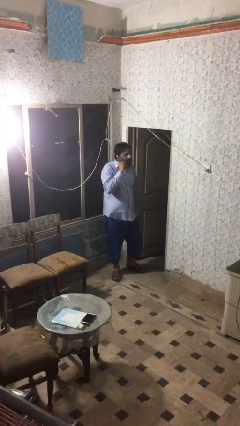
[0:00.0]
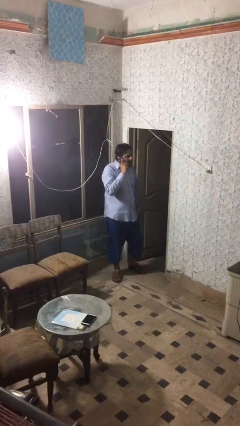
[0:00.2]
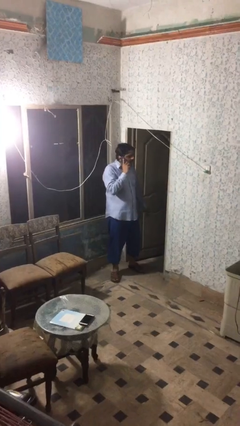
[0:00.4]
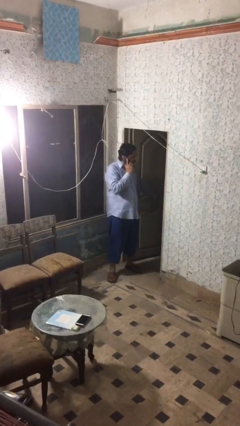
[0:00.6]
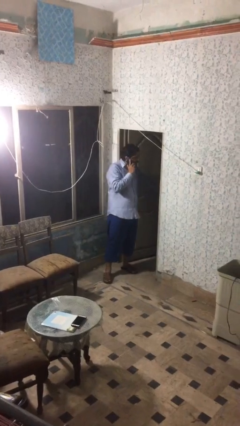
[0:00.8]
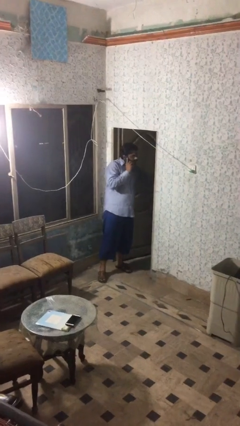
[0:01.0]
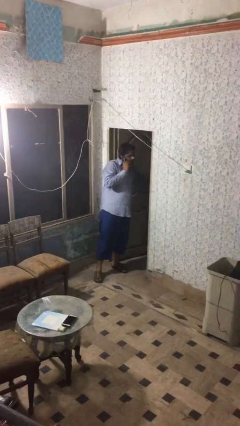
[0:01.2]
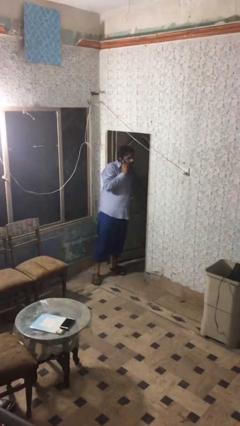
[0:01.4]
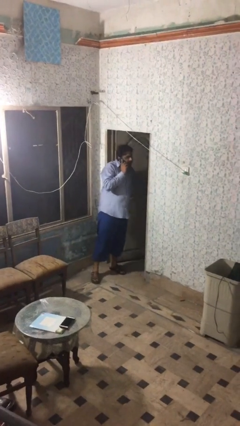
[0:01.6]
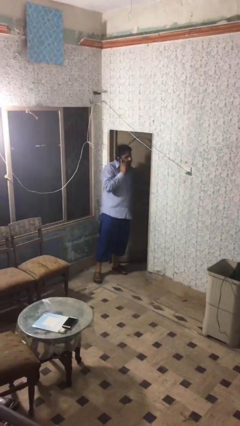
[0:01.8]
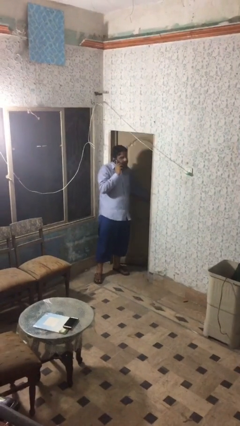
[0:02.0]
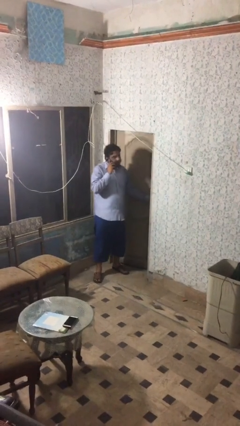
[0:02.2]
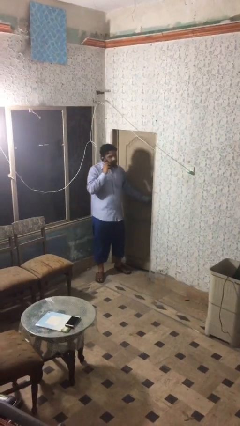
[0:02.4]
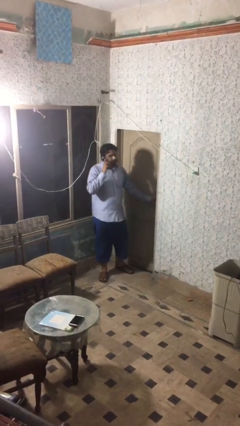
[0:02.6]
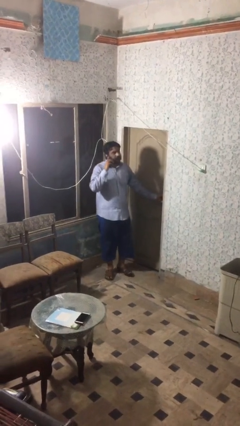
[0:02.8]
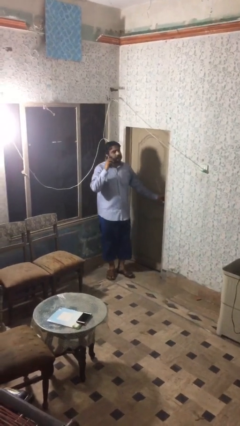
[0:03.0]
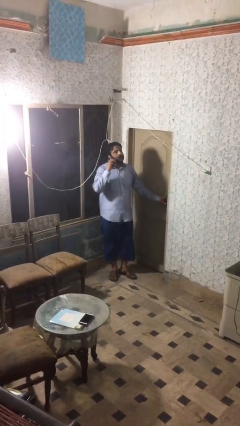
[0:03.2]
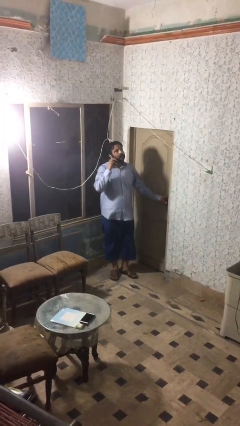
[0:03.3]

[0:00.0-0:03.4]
person closes facility door

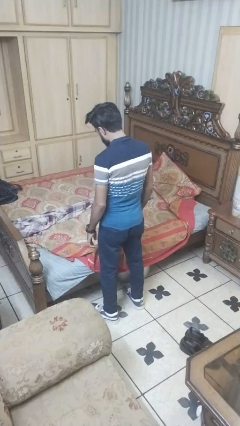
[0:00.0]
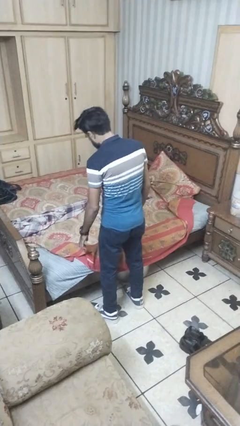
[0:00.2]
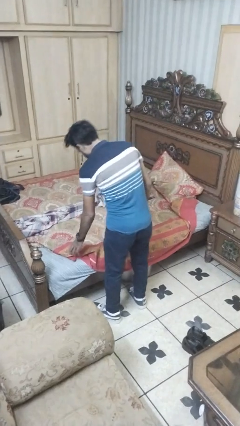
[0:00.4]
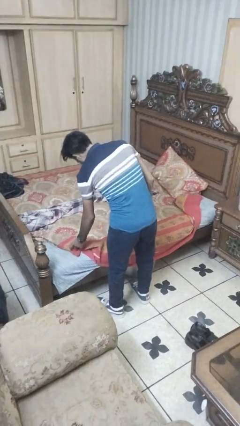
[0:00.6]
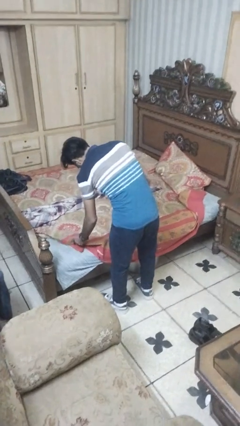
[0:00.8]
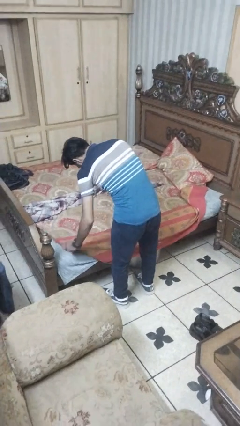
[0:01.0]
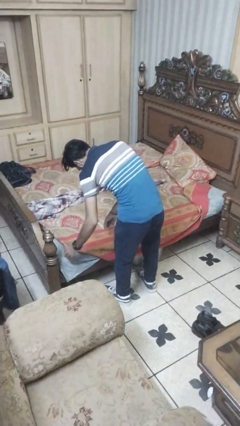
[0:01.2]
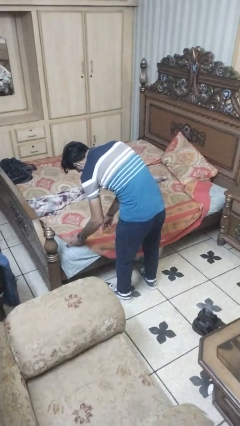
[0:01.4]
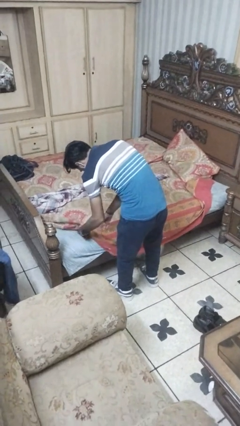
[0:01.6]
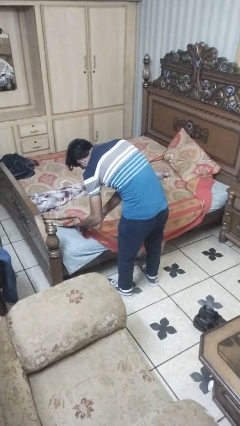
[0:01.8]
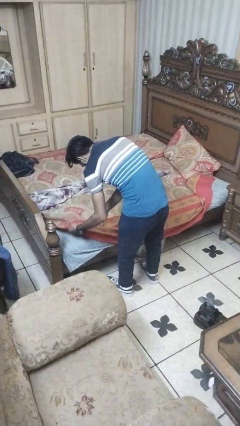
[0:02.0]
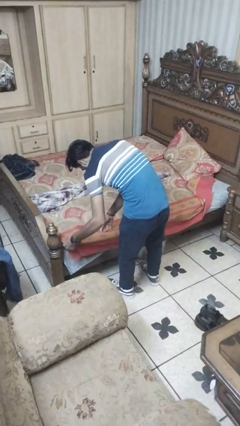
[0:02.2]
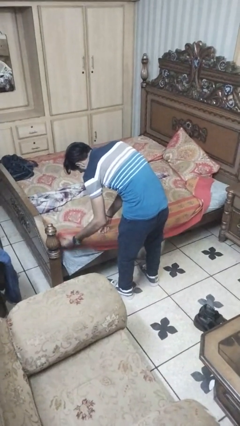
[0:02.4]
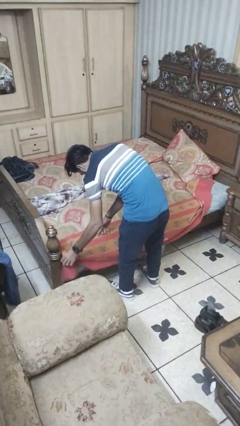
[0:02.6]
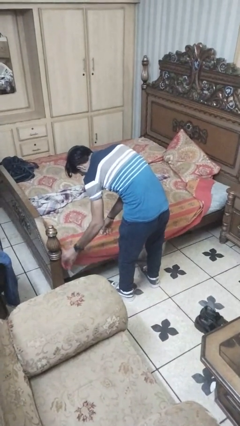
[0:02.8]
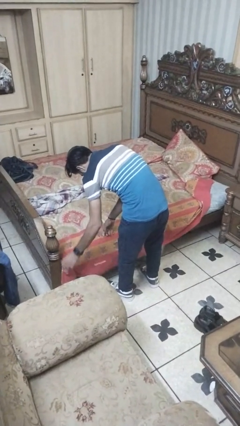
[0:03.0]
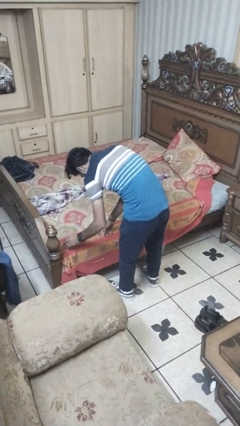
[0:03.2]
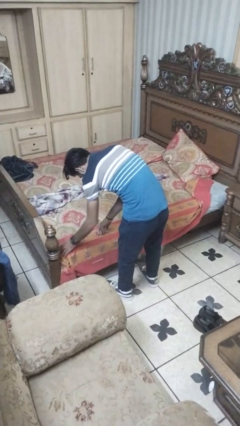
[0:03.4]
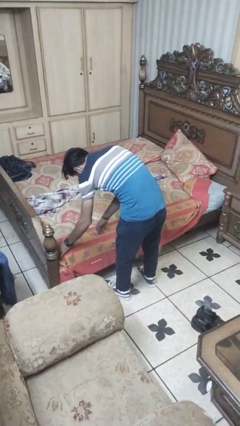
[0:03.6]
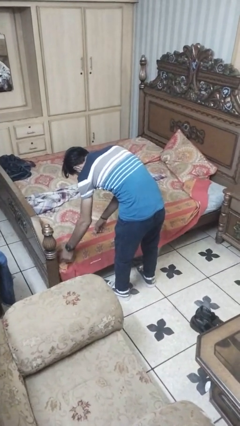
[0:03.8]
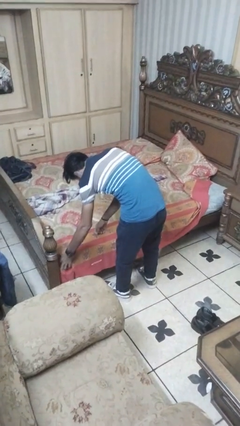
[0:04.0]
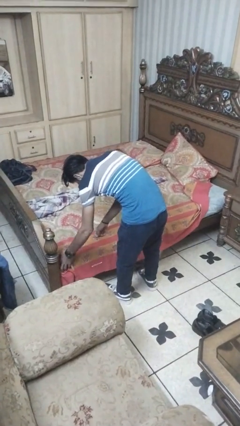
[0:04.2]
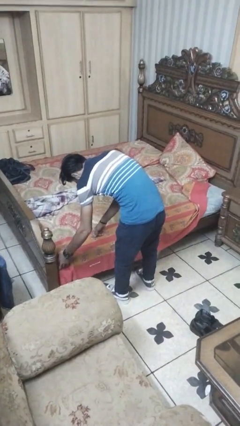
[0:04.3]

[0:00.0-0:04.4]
person makes bed

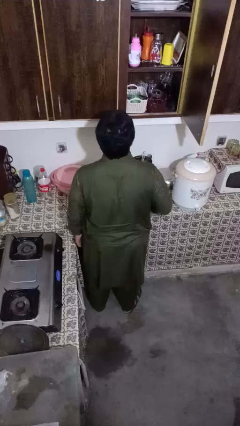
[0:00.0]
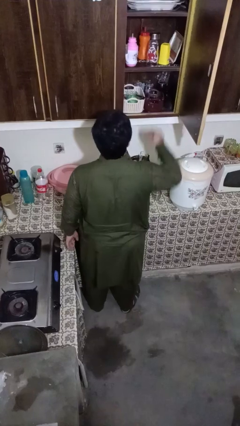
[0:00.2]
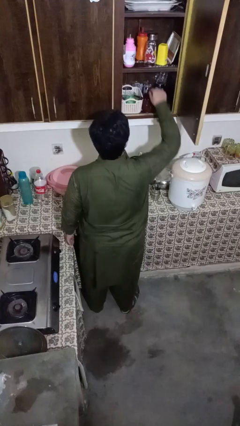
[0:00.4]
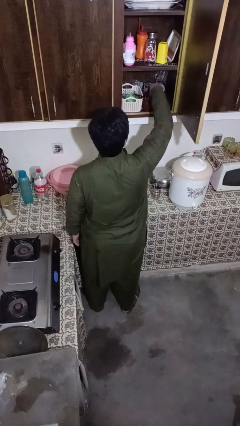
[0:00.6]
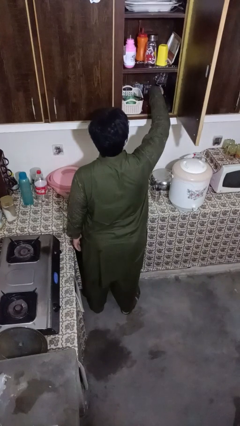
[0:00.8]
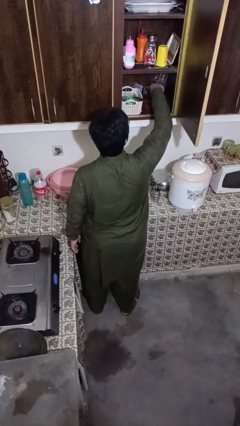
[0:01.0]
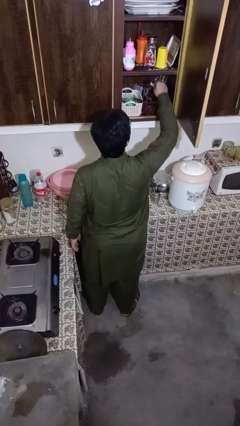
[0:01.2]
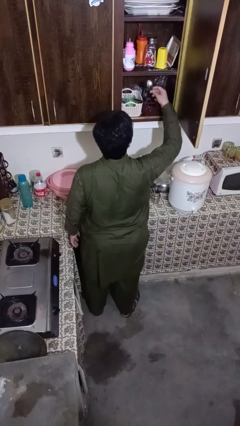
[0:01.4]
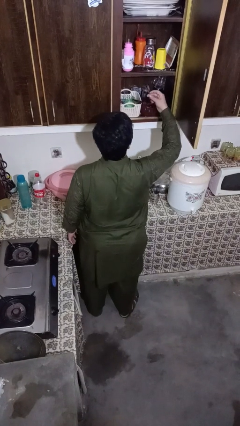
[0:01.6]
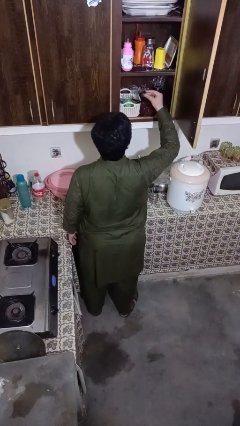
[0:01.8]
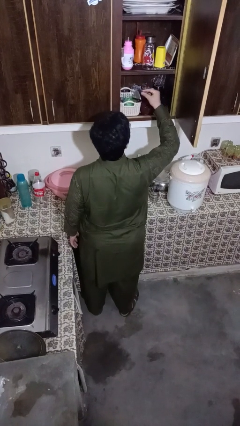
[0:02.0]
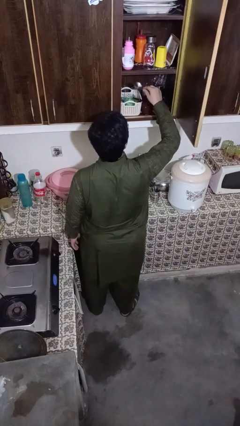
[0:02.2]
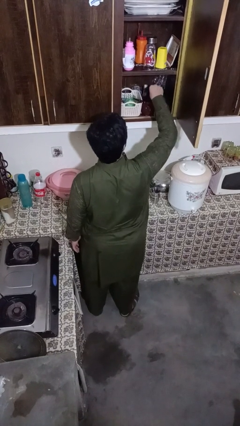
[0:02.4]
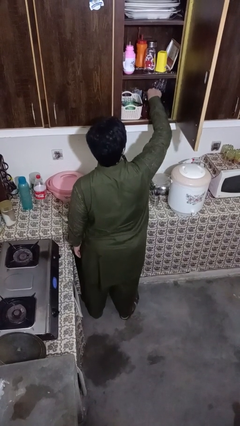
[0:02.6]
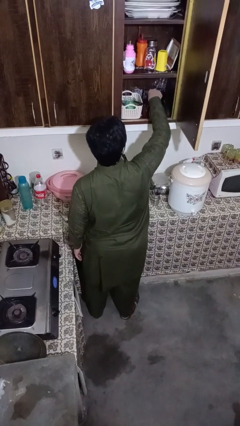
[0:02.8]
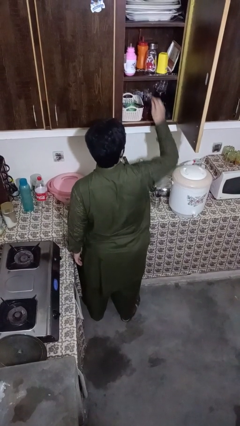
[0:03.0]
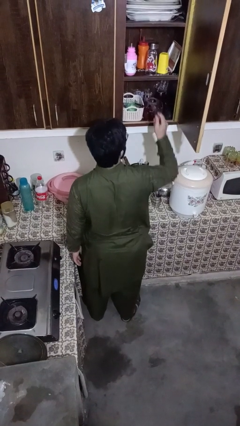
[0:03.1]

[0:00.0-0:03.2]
person takes object from kitchen drawer

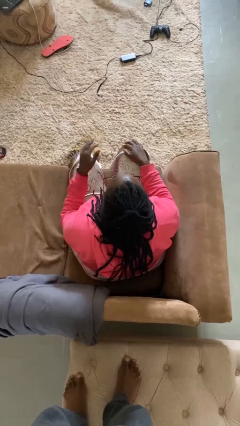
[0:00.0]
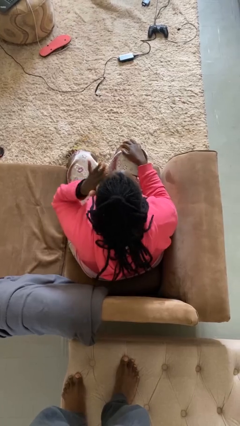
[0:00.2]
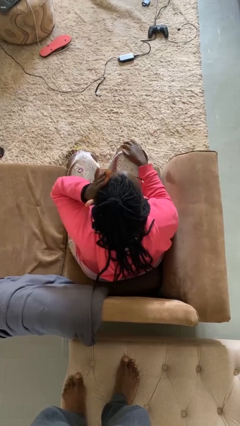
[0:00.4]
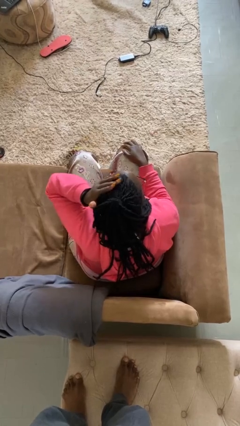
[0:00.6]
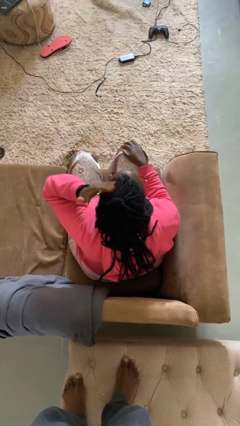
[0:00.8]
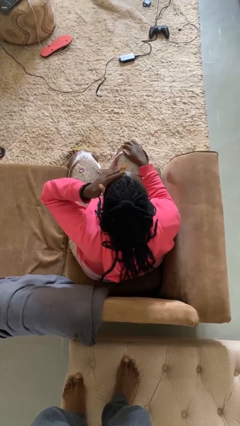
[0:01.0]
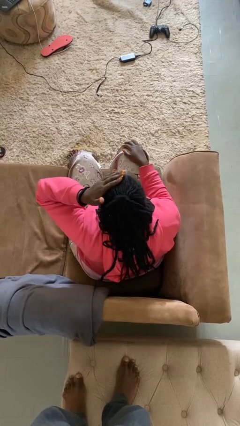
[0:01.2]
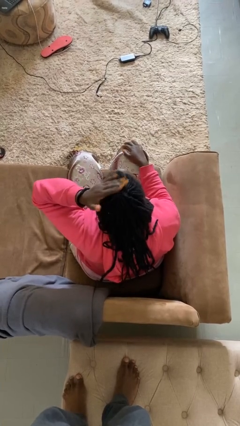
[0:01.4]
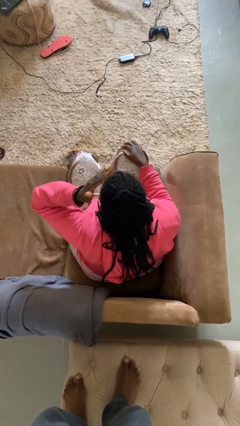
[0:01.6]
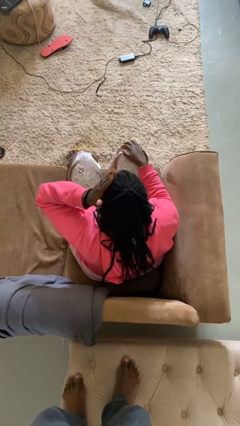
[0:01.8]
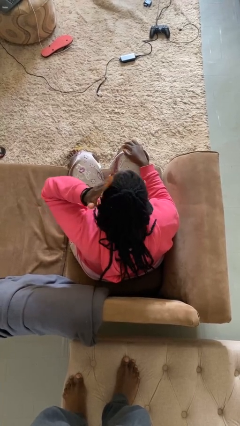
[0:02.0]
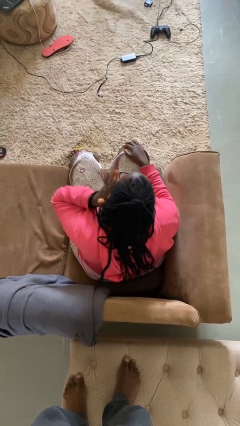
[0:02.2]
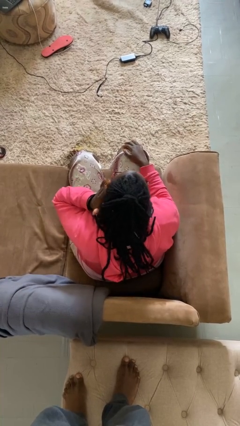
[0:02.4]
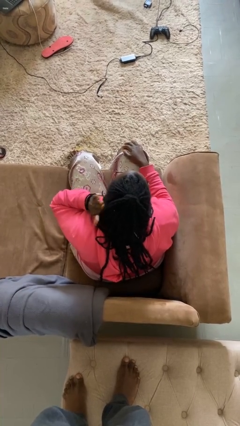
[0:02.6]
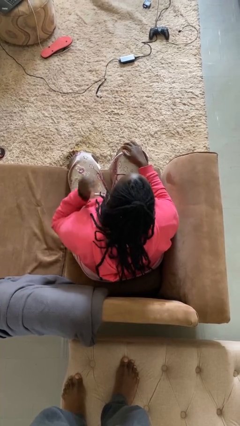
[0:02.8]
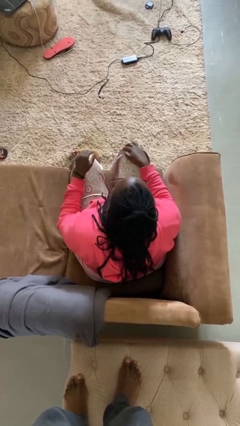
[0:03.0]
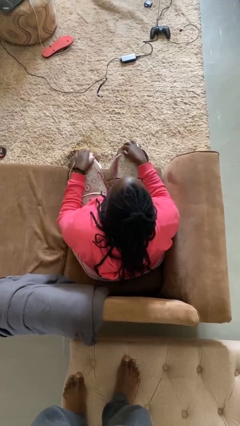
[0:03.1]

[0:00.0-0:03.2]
person strokes hair

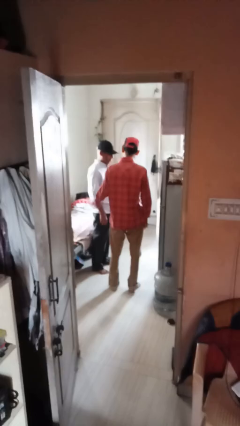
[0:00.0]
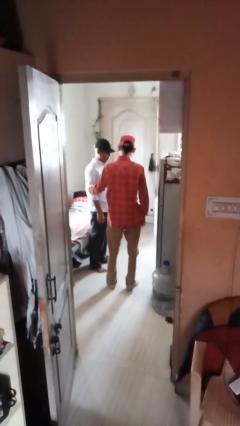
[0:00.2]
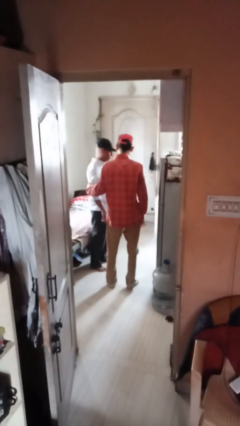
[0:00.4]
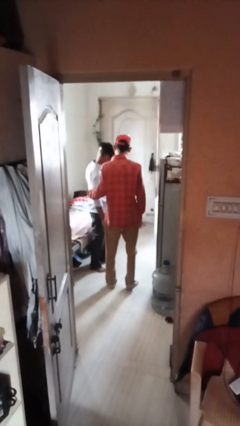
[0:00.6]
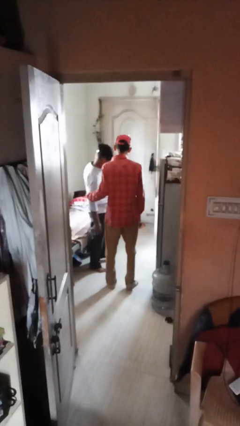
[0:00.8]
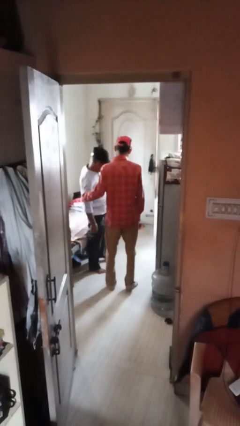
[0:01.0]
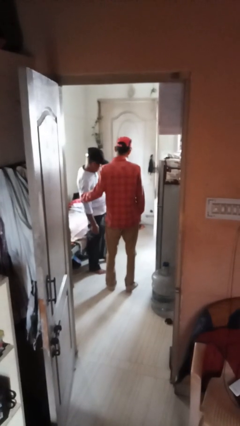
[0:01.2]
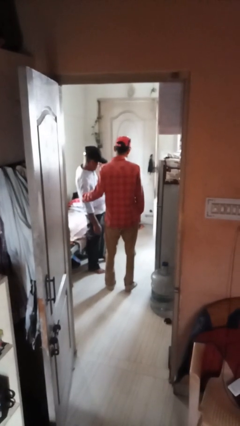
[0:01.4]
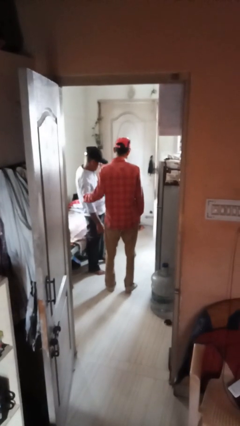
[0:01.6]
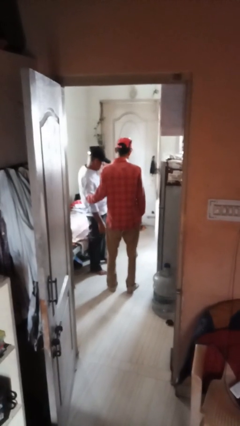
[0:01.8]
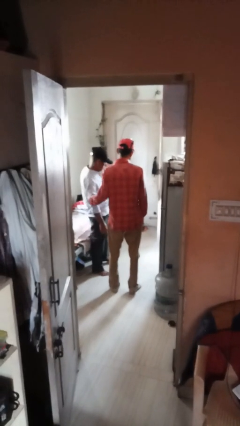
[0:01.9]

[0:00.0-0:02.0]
person grabs person by bicep

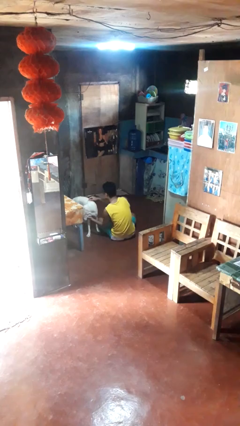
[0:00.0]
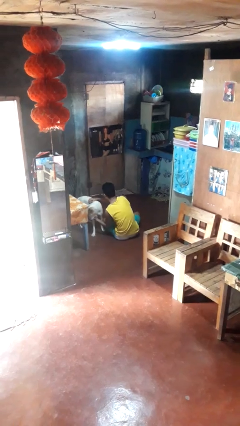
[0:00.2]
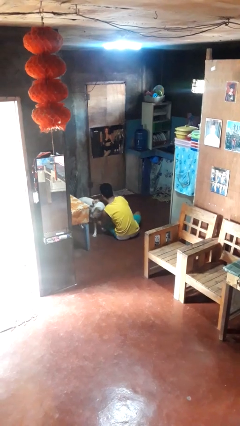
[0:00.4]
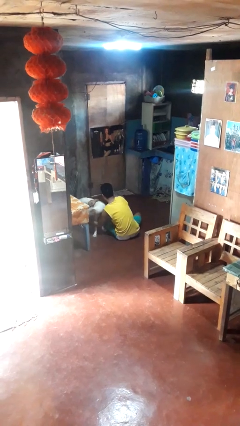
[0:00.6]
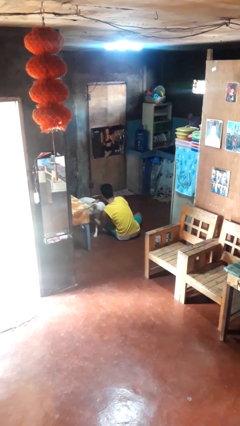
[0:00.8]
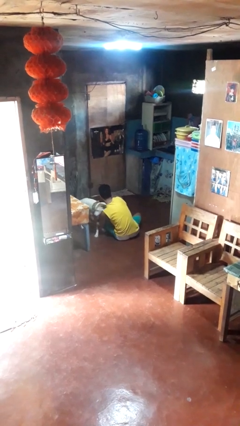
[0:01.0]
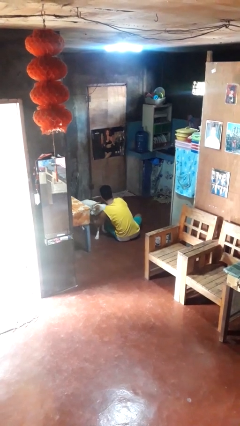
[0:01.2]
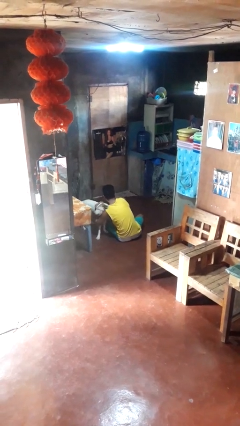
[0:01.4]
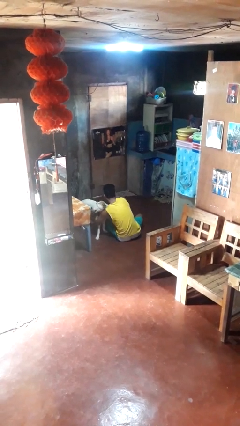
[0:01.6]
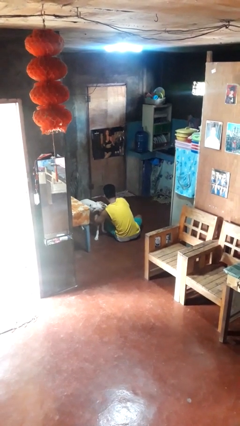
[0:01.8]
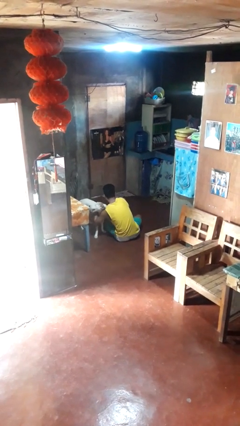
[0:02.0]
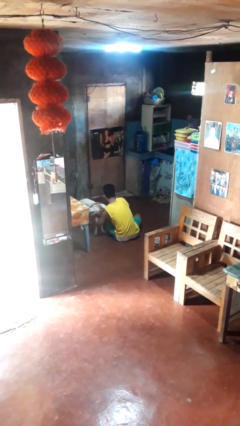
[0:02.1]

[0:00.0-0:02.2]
person hugs dog
